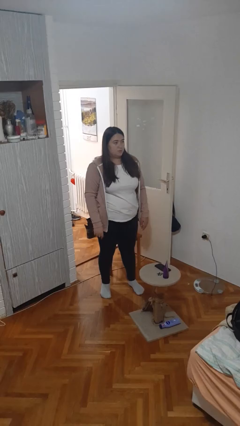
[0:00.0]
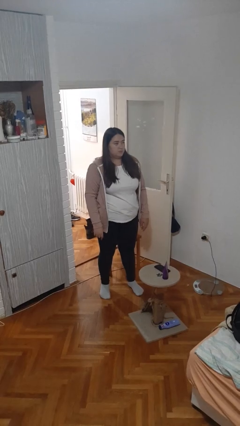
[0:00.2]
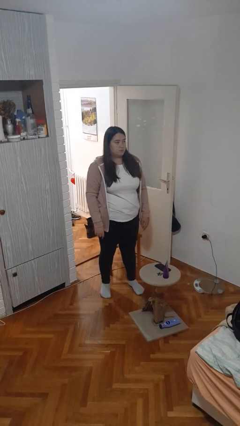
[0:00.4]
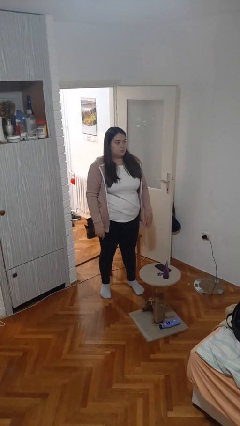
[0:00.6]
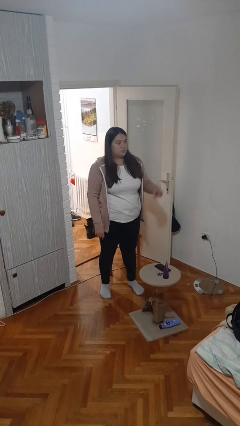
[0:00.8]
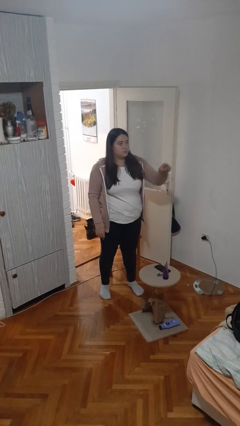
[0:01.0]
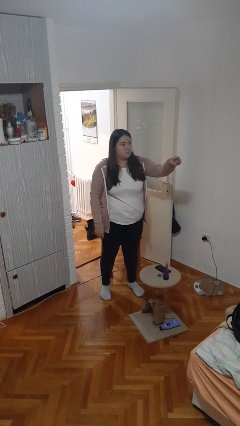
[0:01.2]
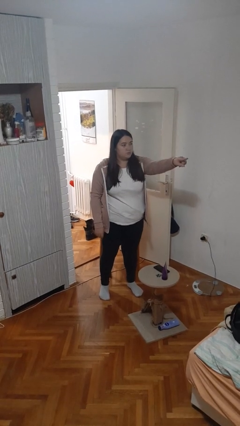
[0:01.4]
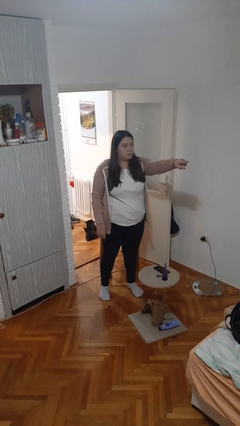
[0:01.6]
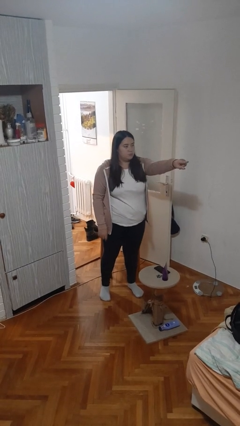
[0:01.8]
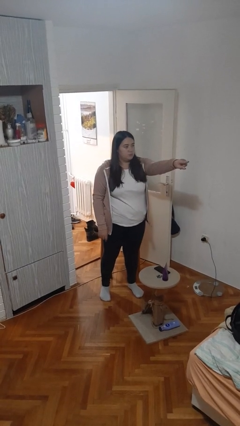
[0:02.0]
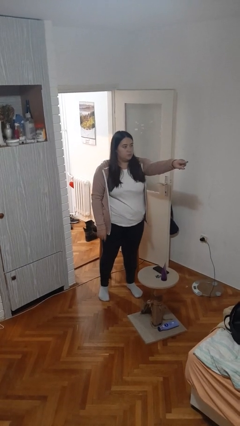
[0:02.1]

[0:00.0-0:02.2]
person points at person

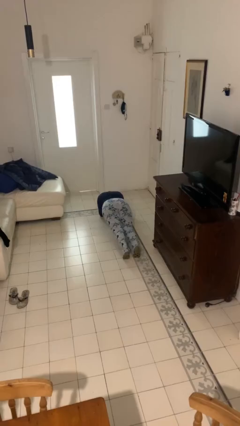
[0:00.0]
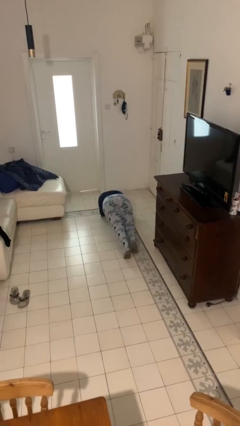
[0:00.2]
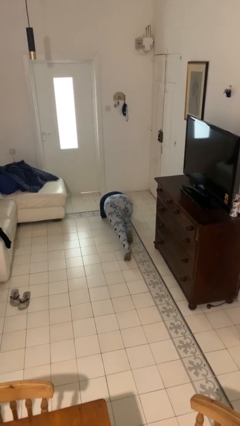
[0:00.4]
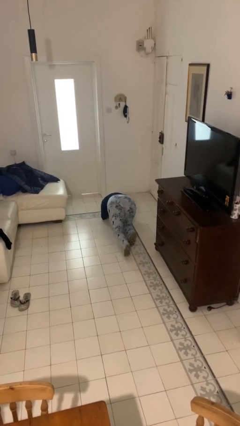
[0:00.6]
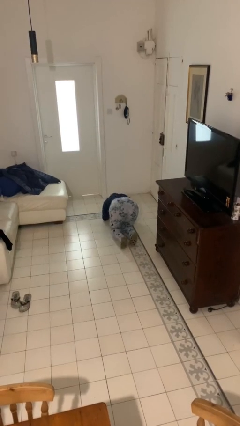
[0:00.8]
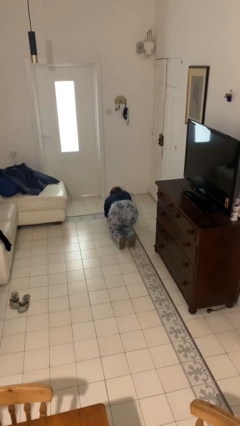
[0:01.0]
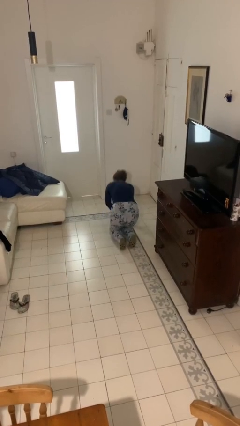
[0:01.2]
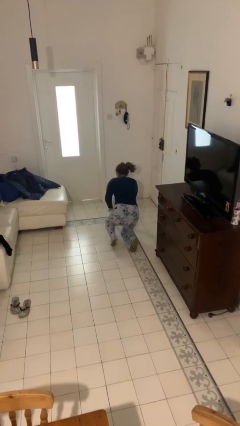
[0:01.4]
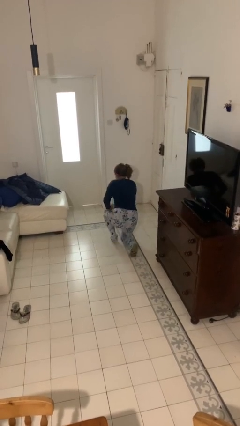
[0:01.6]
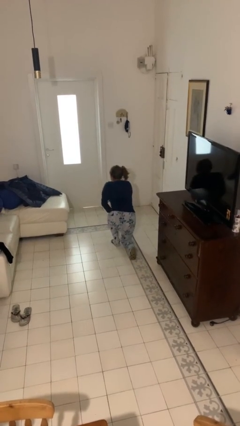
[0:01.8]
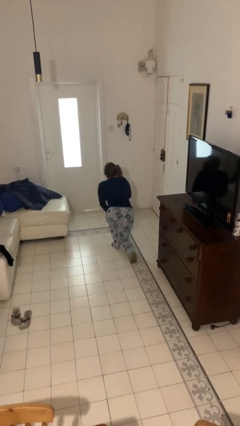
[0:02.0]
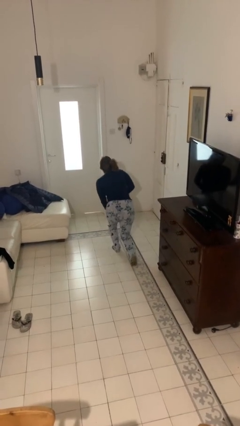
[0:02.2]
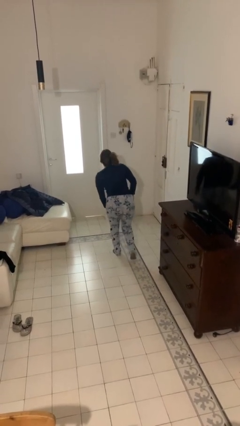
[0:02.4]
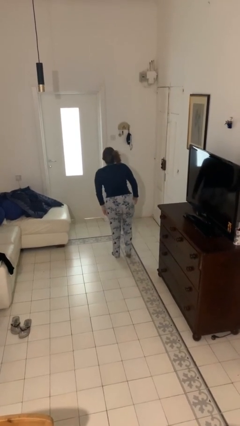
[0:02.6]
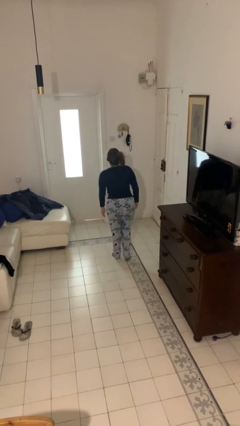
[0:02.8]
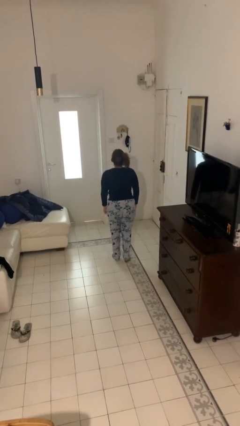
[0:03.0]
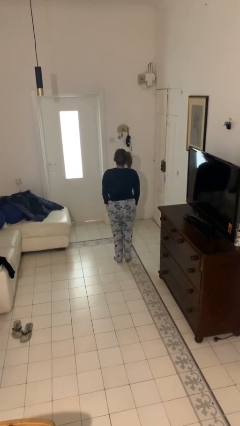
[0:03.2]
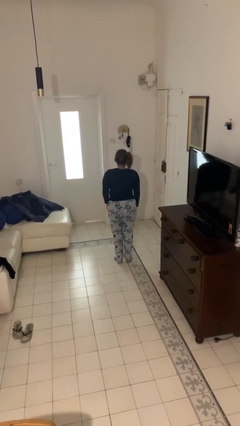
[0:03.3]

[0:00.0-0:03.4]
person stands up from floor

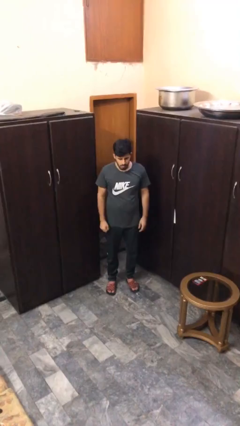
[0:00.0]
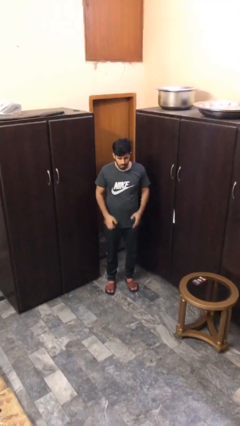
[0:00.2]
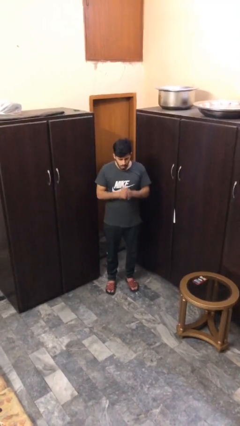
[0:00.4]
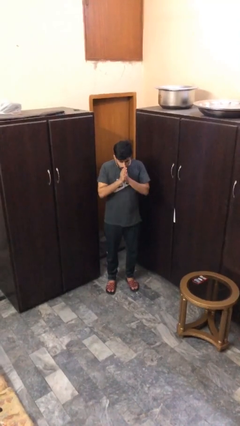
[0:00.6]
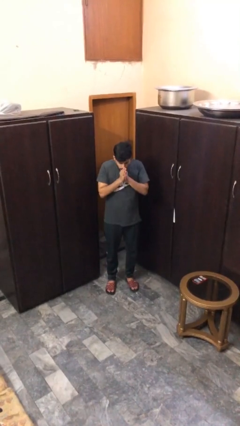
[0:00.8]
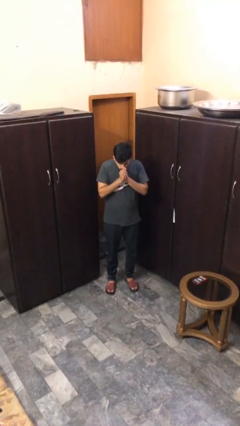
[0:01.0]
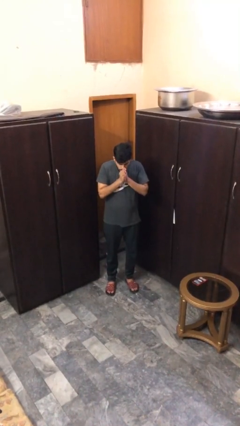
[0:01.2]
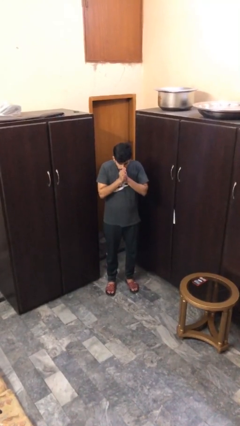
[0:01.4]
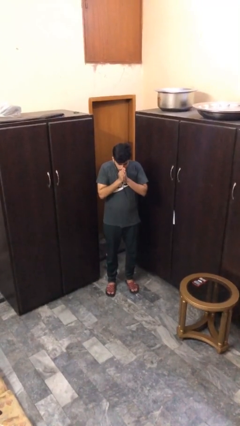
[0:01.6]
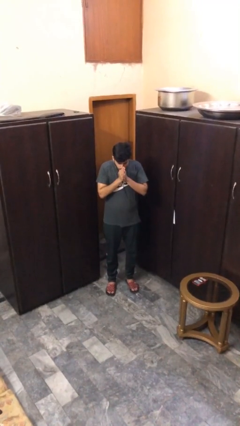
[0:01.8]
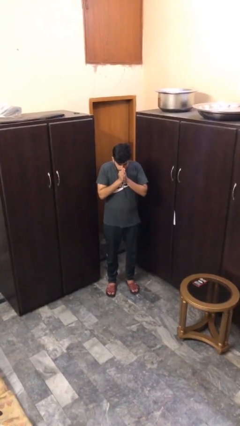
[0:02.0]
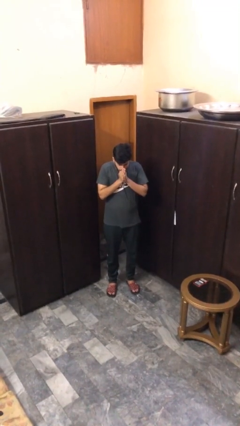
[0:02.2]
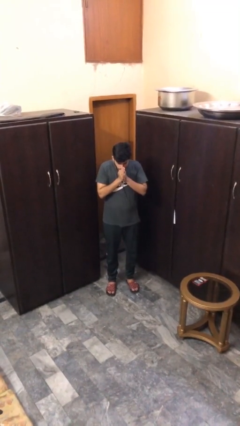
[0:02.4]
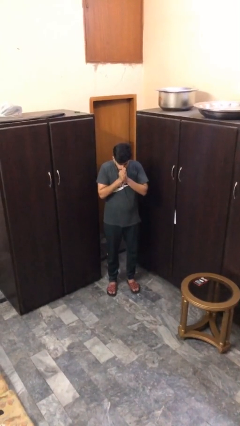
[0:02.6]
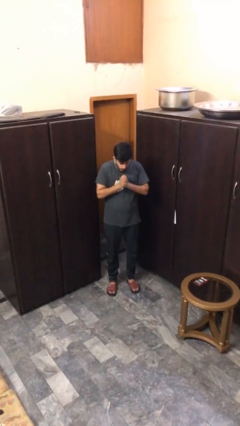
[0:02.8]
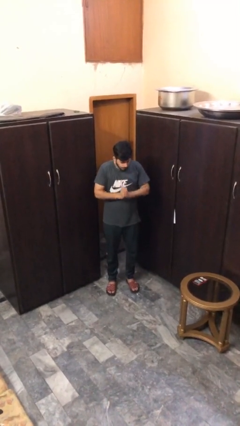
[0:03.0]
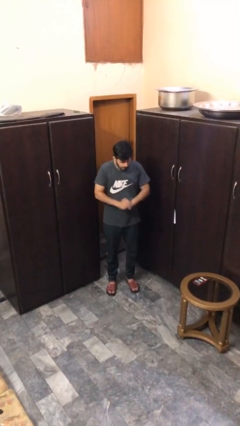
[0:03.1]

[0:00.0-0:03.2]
person blows into hands

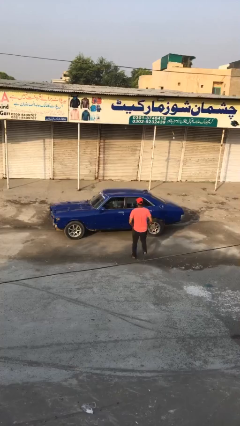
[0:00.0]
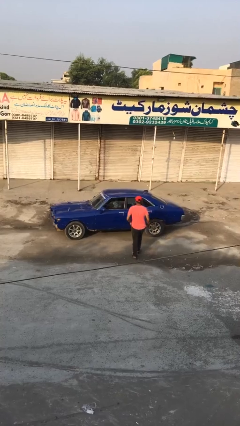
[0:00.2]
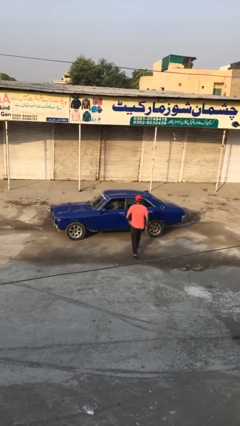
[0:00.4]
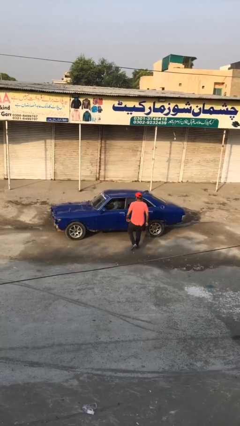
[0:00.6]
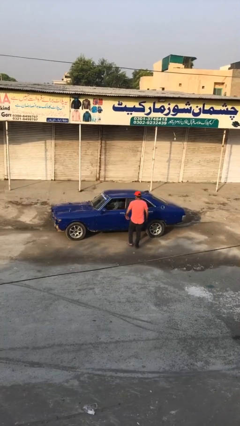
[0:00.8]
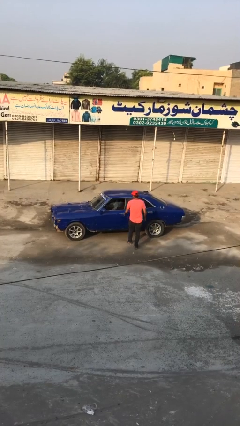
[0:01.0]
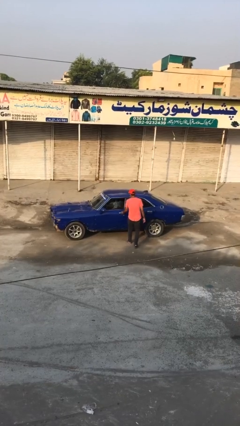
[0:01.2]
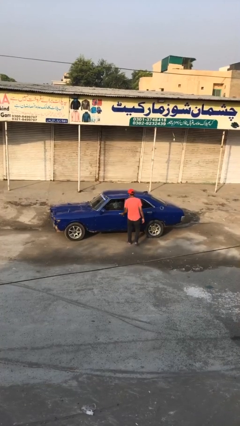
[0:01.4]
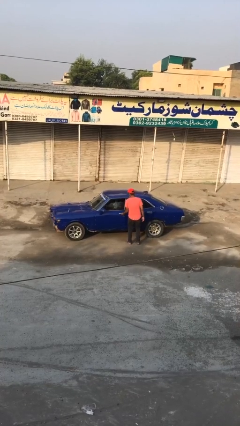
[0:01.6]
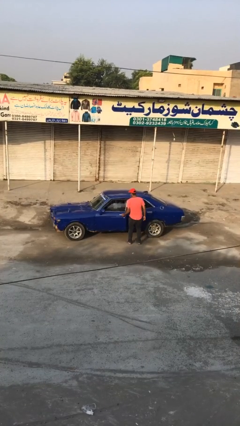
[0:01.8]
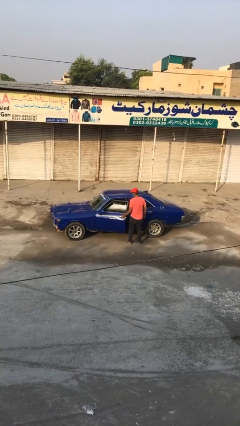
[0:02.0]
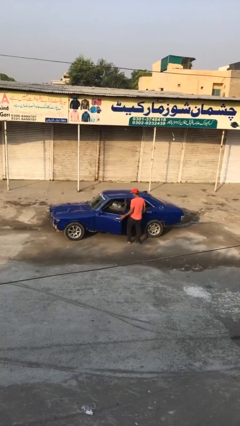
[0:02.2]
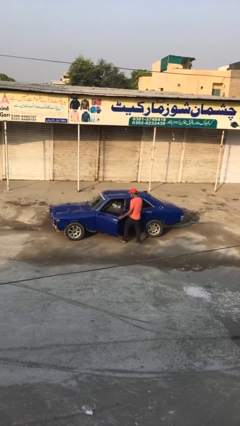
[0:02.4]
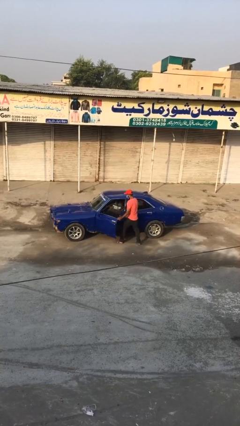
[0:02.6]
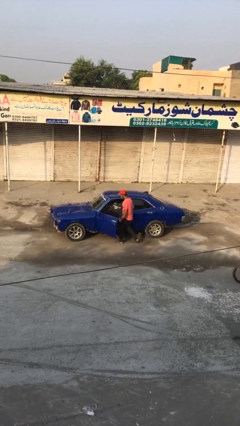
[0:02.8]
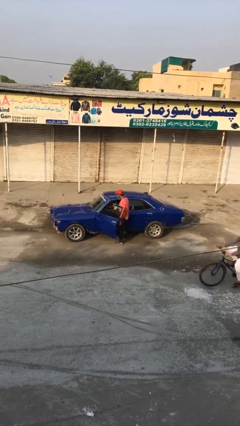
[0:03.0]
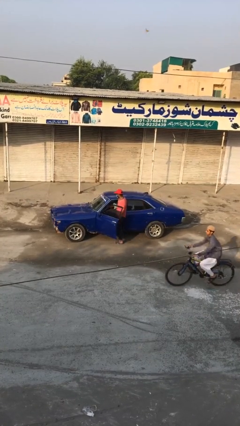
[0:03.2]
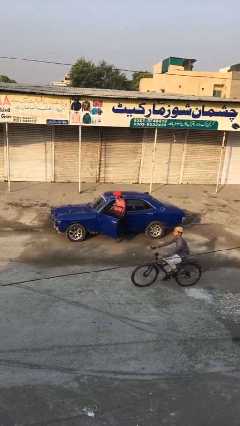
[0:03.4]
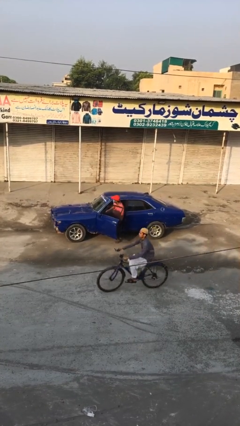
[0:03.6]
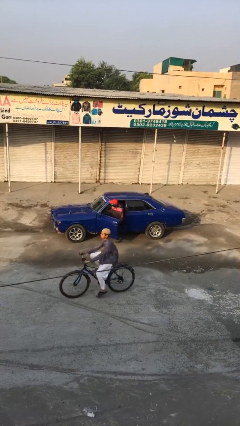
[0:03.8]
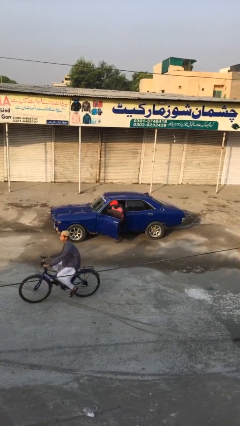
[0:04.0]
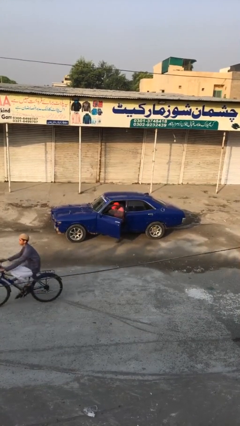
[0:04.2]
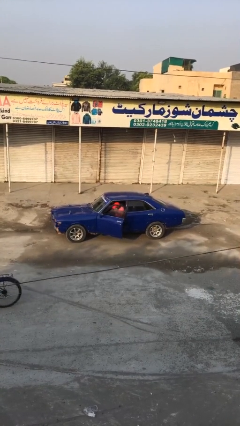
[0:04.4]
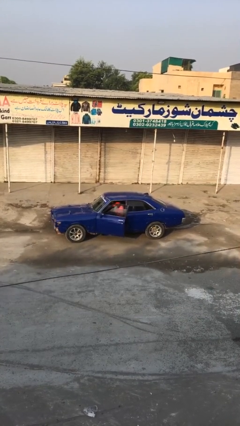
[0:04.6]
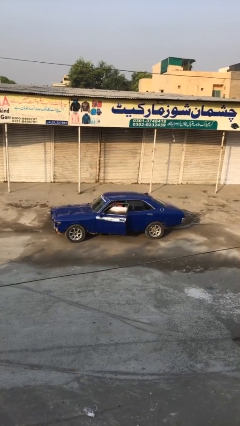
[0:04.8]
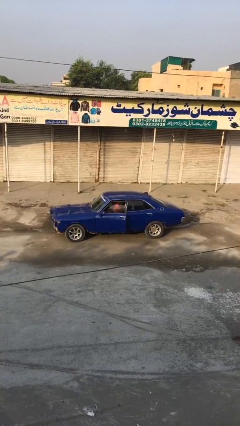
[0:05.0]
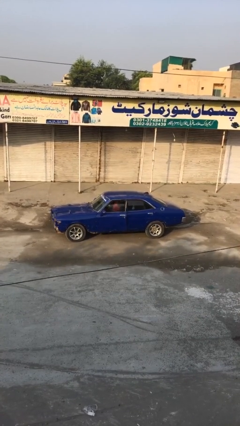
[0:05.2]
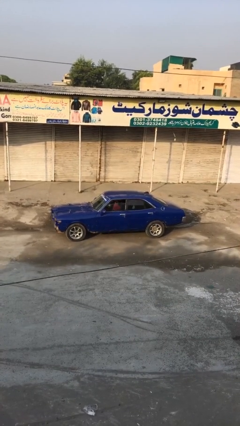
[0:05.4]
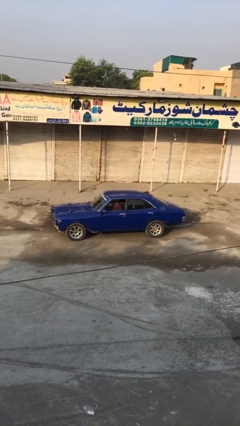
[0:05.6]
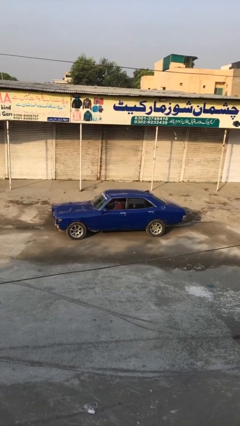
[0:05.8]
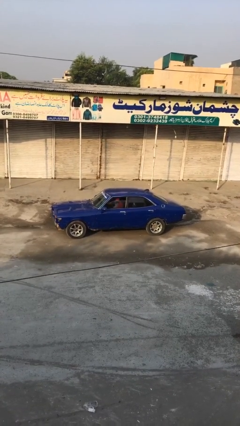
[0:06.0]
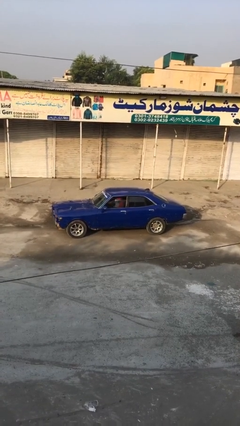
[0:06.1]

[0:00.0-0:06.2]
car picks up person

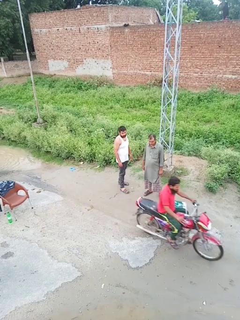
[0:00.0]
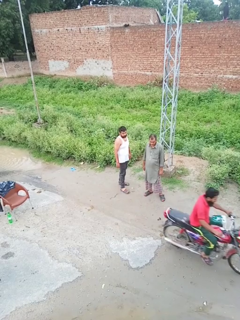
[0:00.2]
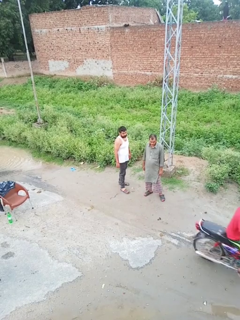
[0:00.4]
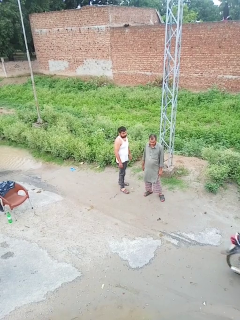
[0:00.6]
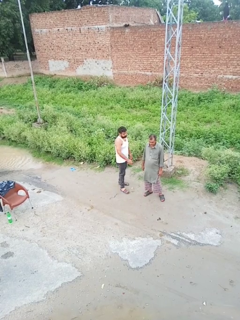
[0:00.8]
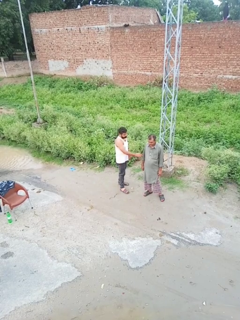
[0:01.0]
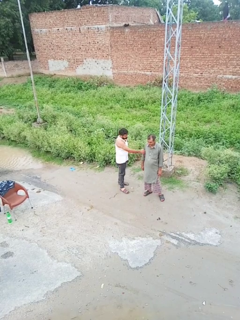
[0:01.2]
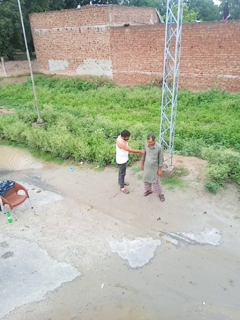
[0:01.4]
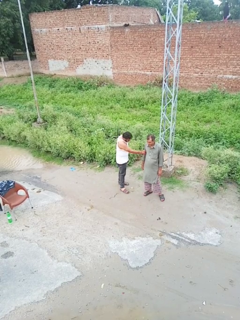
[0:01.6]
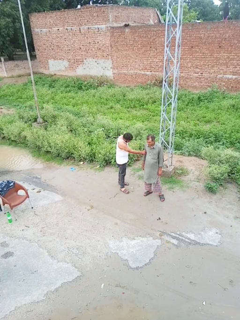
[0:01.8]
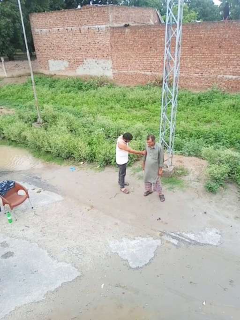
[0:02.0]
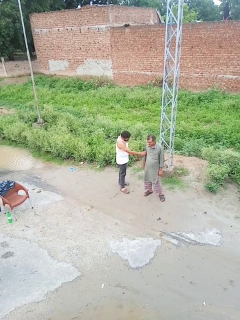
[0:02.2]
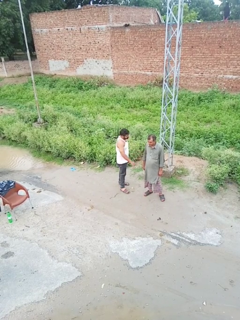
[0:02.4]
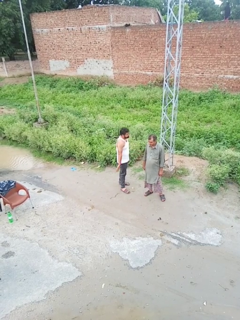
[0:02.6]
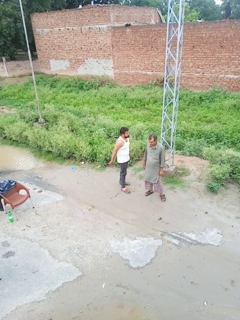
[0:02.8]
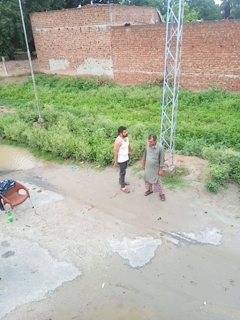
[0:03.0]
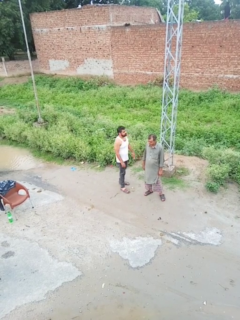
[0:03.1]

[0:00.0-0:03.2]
person grabs person by bicep
